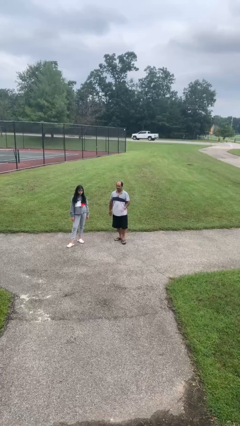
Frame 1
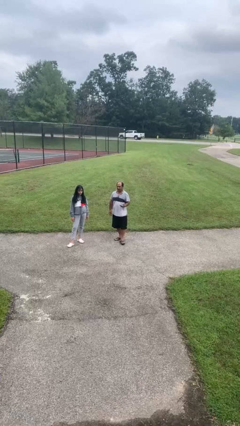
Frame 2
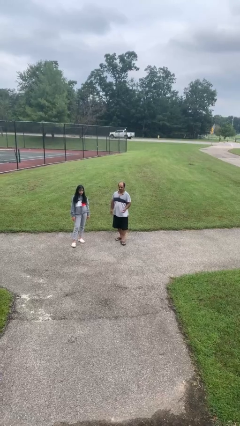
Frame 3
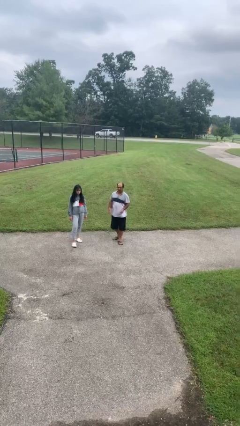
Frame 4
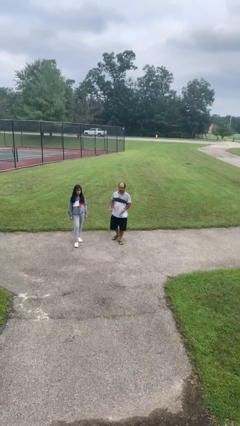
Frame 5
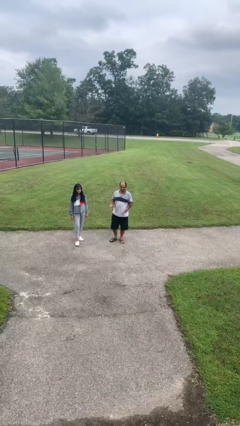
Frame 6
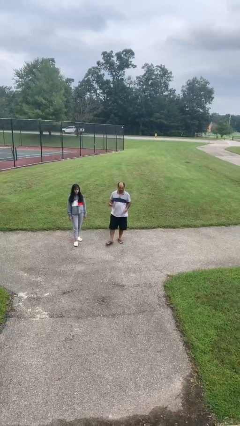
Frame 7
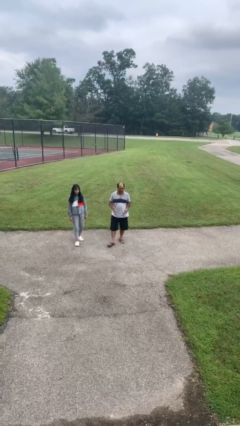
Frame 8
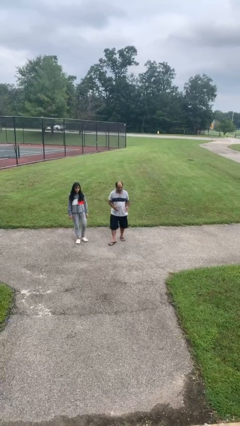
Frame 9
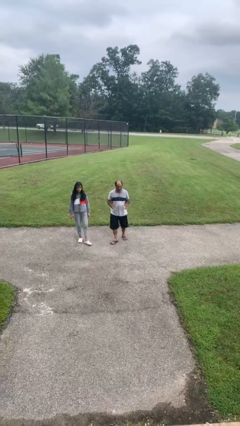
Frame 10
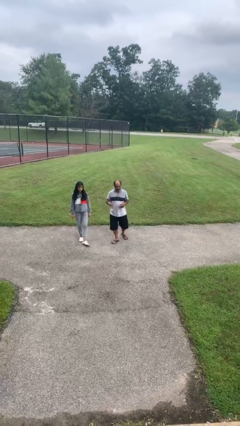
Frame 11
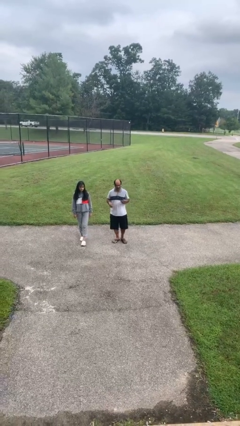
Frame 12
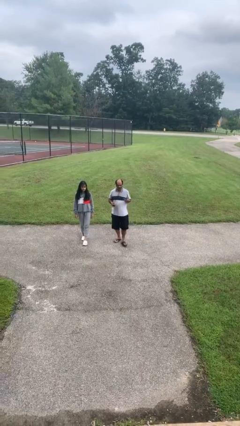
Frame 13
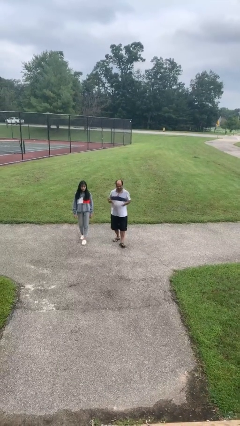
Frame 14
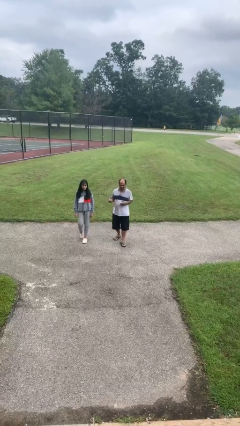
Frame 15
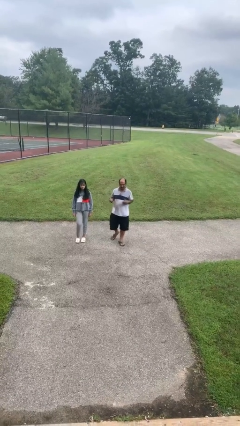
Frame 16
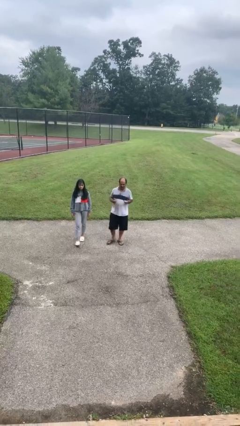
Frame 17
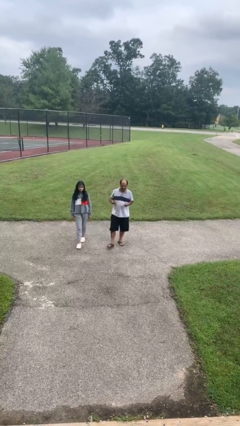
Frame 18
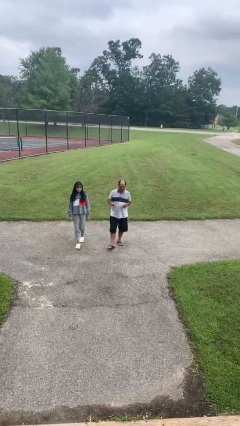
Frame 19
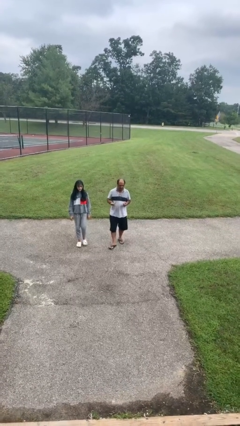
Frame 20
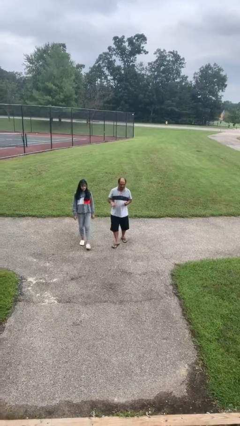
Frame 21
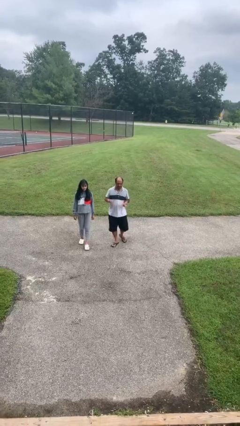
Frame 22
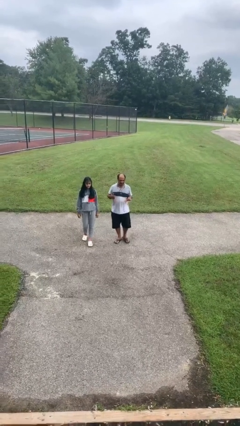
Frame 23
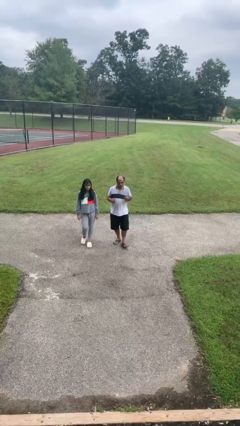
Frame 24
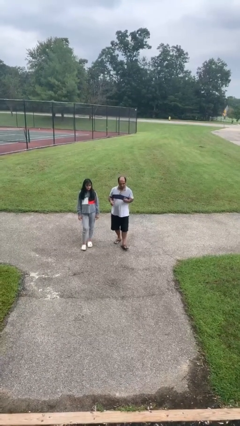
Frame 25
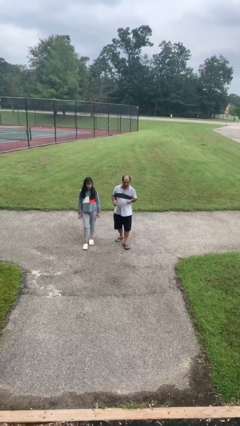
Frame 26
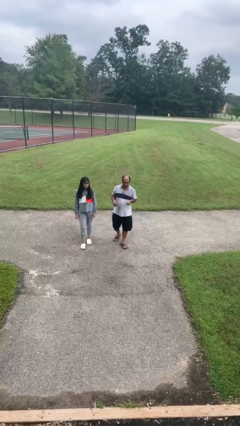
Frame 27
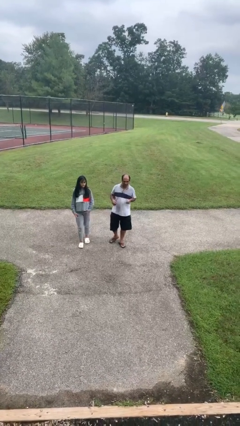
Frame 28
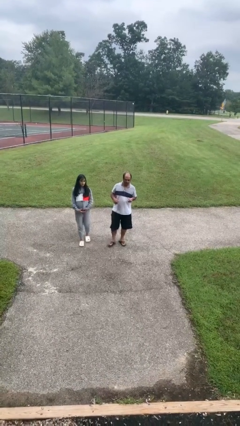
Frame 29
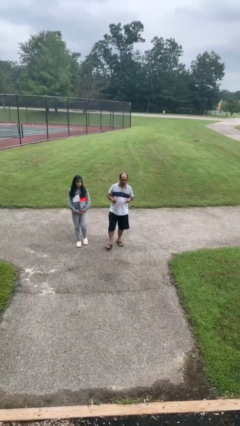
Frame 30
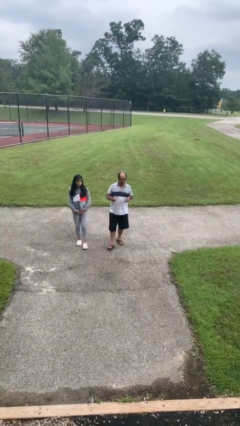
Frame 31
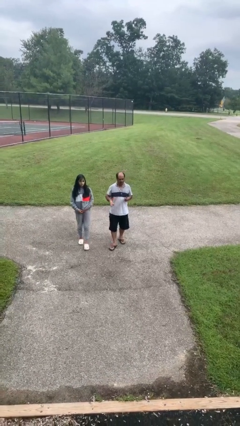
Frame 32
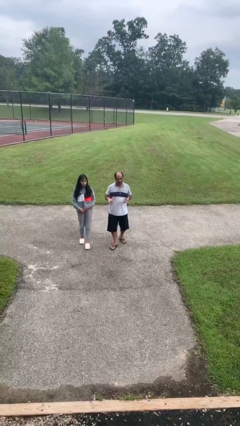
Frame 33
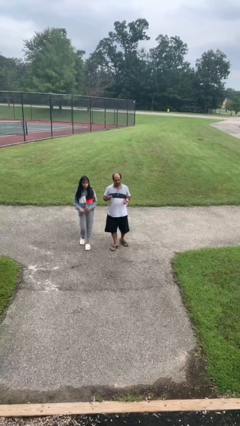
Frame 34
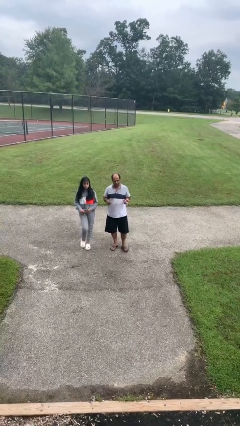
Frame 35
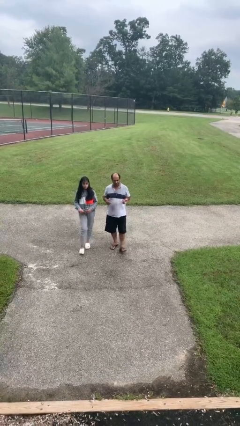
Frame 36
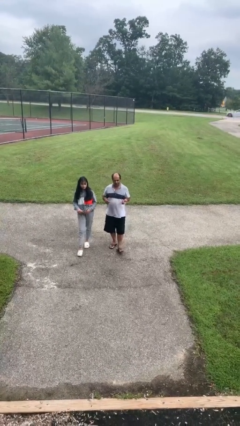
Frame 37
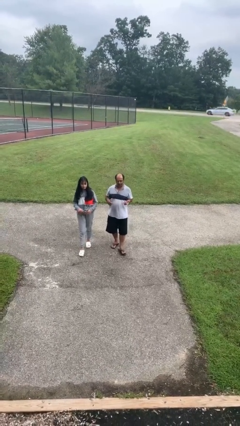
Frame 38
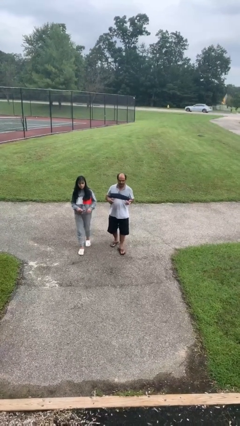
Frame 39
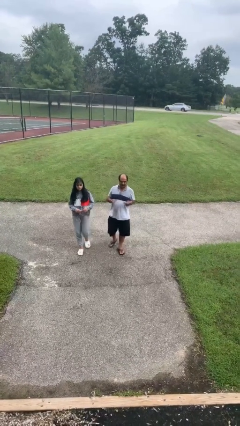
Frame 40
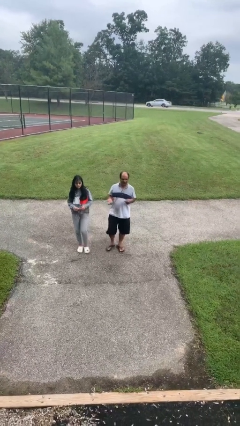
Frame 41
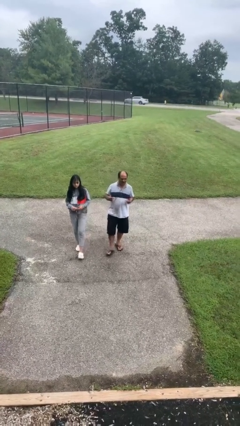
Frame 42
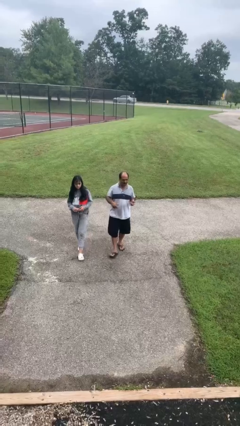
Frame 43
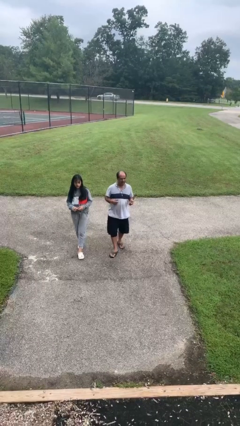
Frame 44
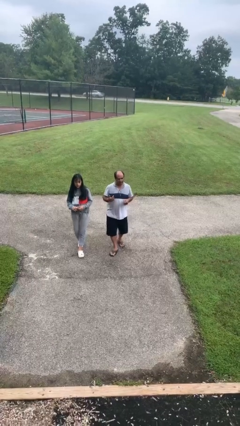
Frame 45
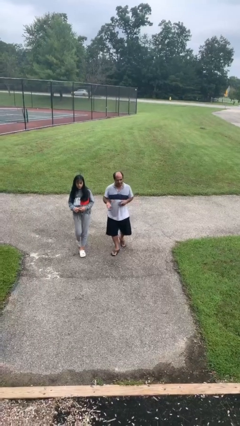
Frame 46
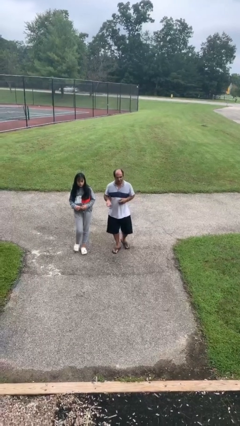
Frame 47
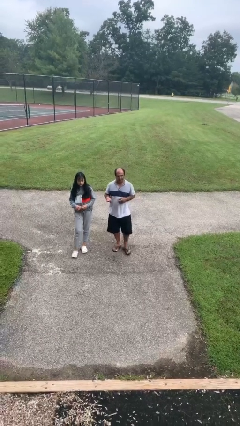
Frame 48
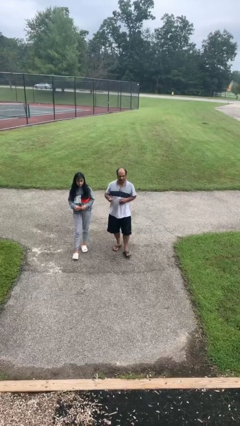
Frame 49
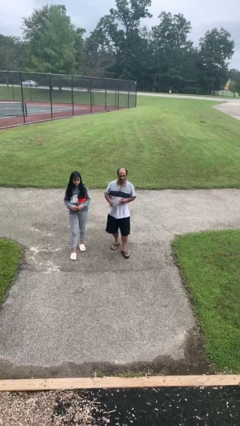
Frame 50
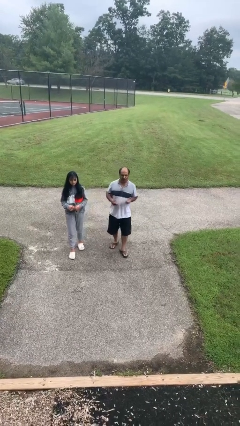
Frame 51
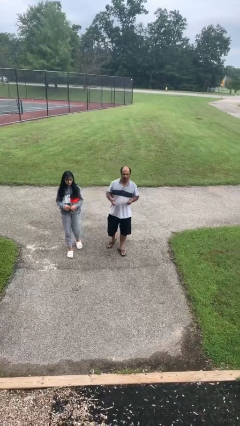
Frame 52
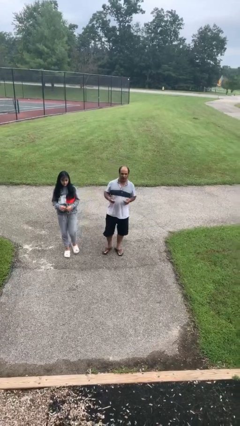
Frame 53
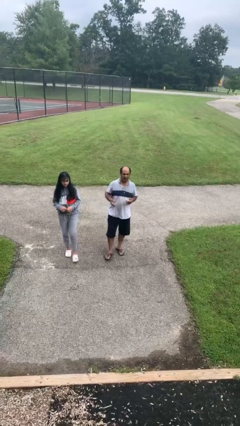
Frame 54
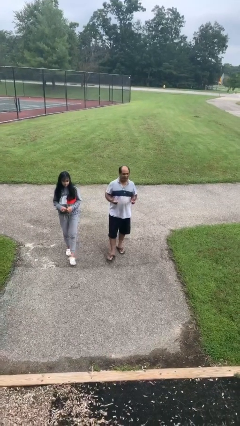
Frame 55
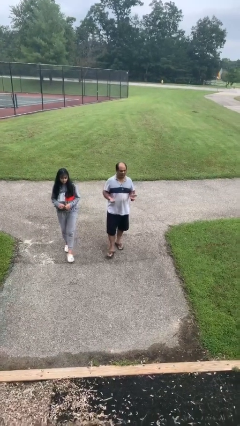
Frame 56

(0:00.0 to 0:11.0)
person talks to person

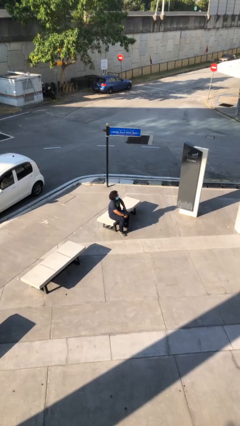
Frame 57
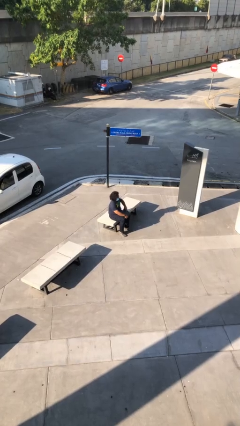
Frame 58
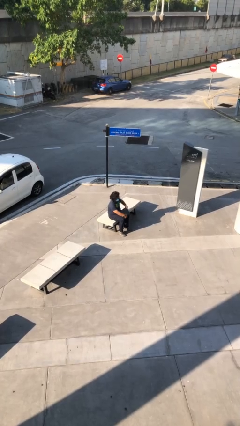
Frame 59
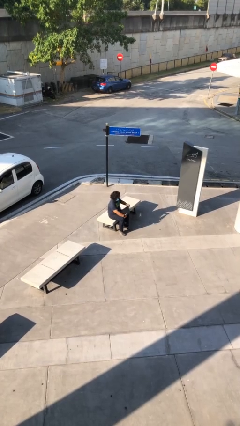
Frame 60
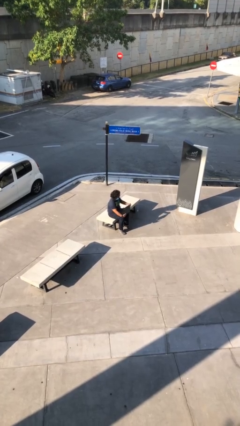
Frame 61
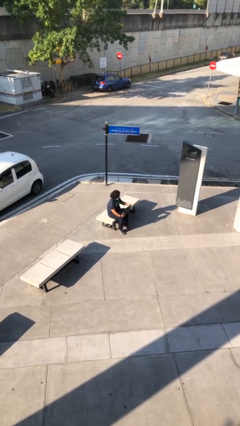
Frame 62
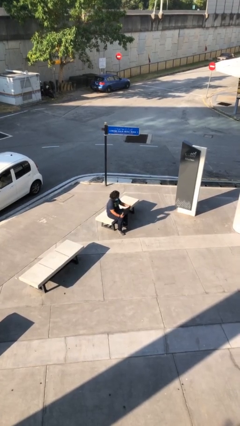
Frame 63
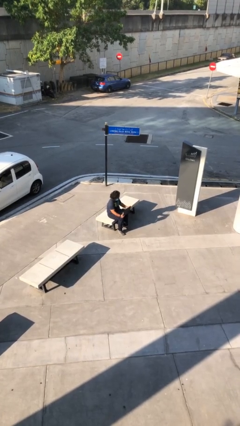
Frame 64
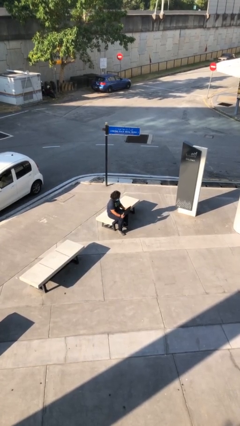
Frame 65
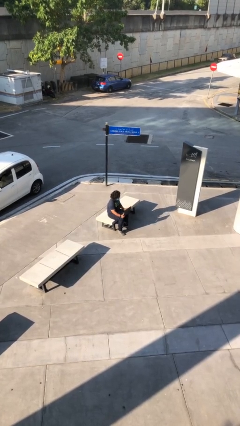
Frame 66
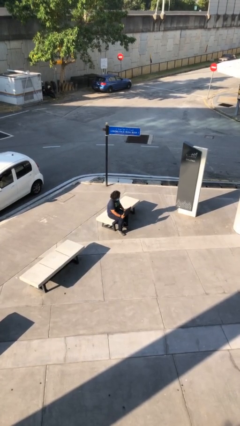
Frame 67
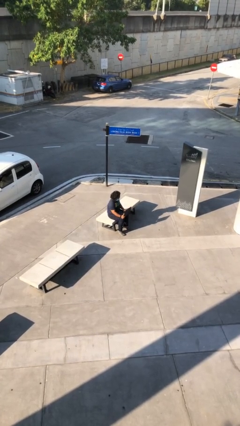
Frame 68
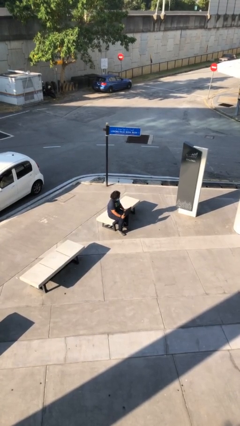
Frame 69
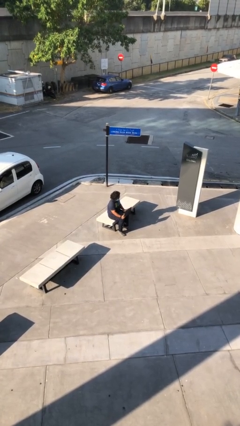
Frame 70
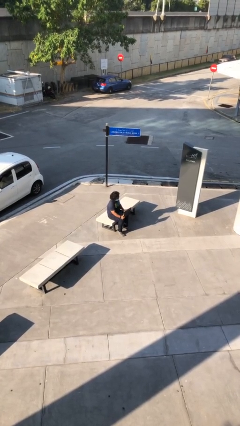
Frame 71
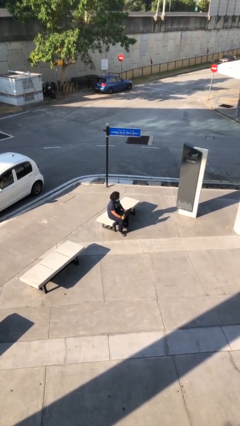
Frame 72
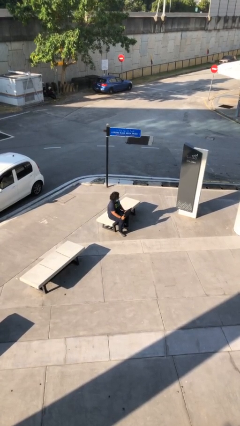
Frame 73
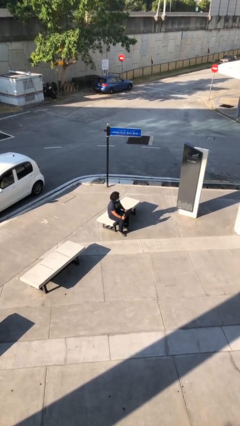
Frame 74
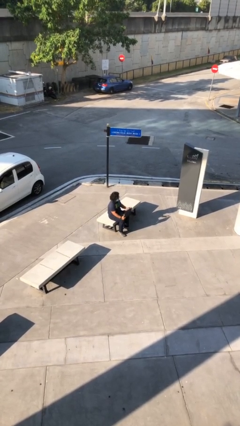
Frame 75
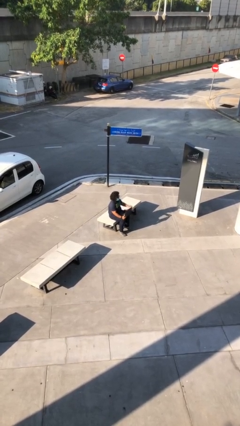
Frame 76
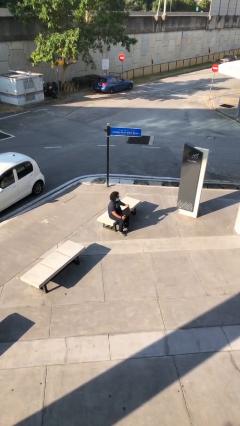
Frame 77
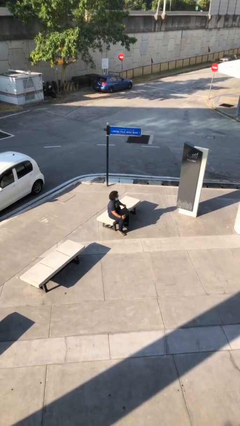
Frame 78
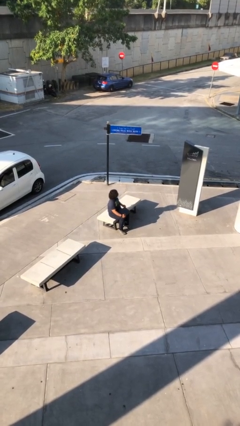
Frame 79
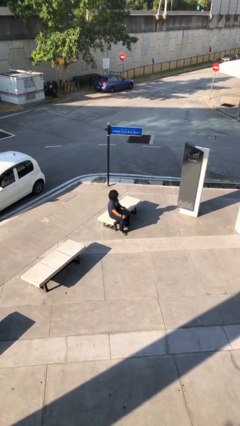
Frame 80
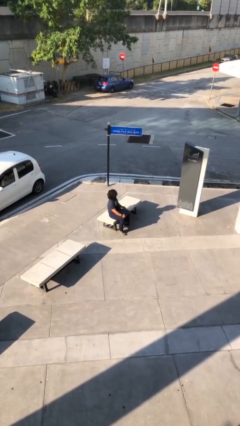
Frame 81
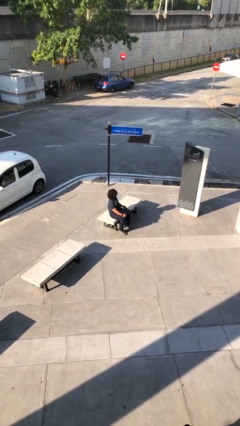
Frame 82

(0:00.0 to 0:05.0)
person interacts with laptop

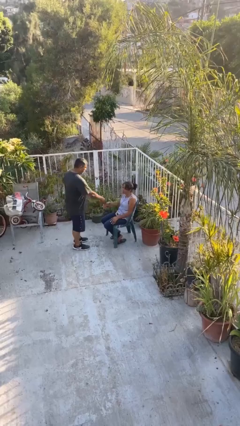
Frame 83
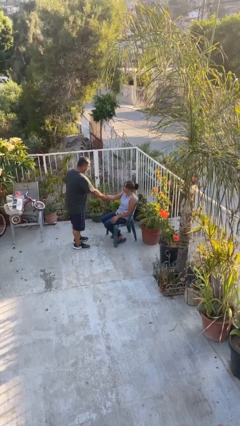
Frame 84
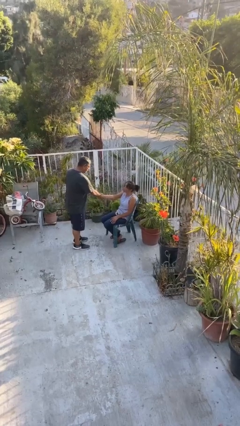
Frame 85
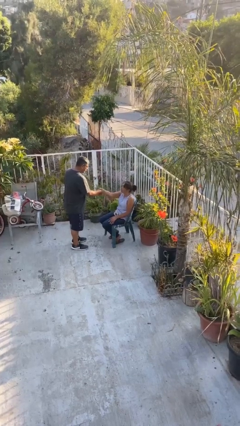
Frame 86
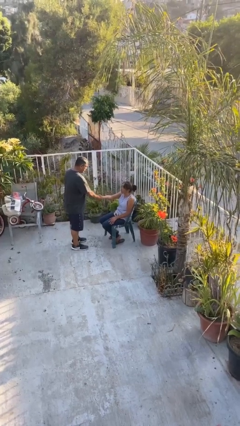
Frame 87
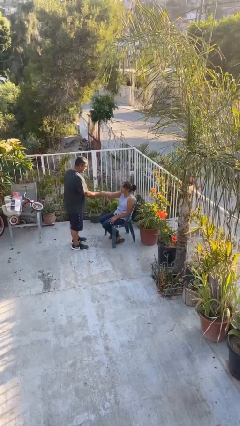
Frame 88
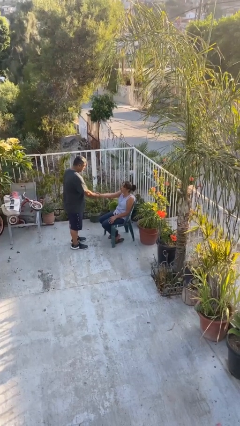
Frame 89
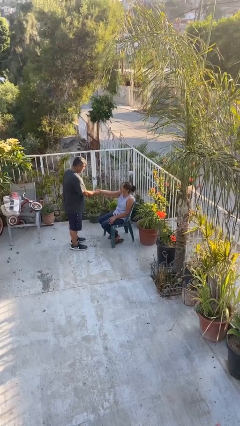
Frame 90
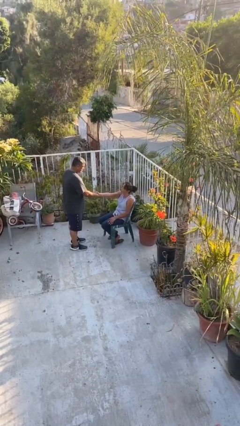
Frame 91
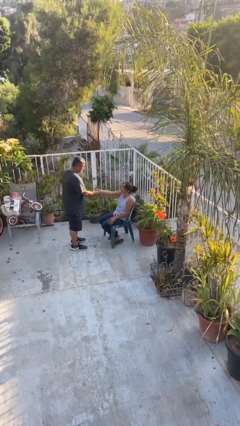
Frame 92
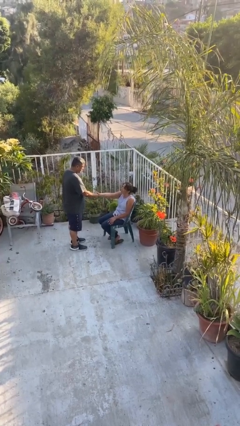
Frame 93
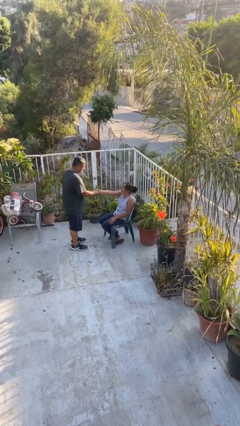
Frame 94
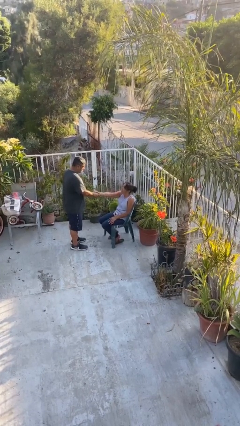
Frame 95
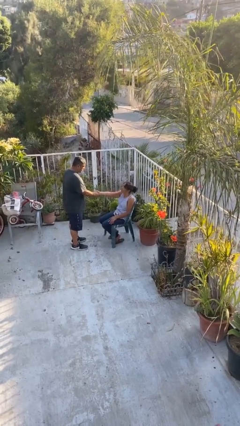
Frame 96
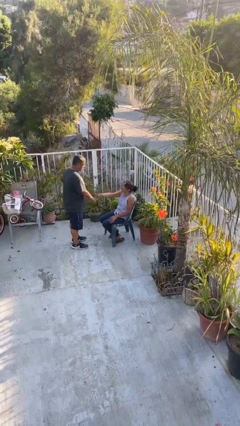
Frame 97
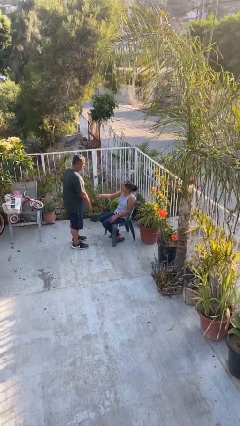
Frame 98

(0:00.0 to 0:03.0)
person shakes hand
